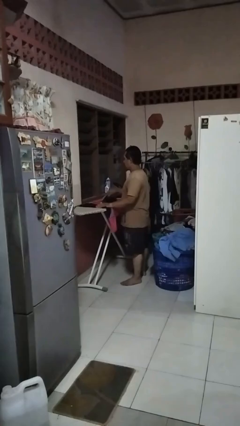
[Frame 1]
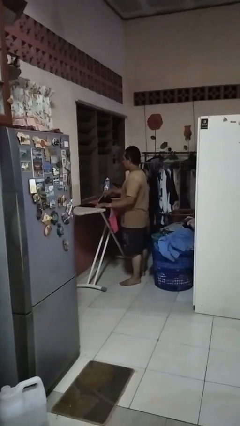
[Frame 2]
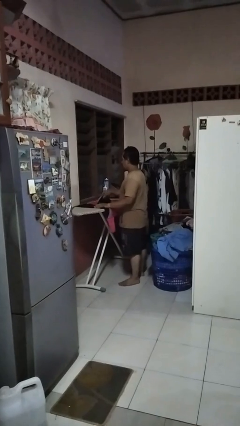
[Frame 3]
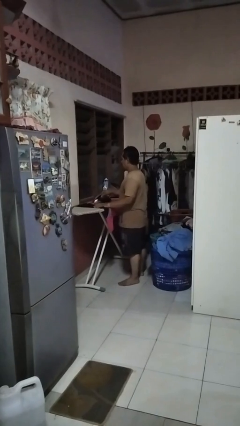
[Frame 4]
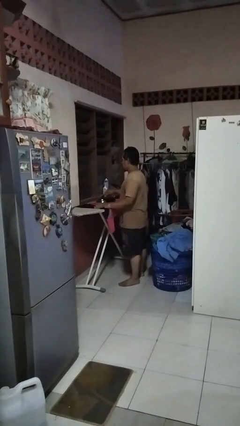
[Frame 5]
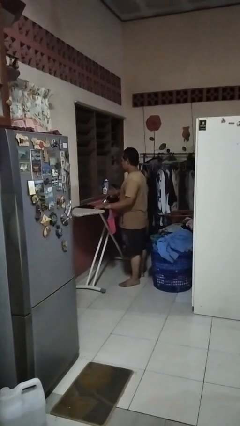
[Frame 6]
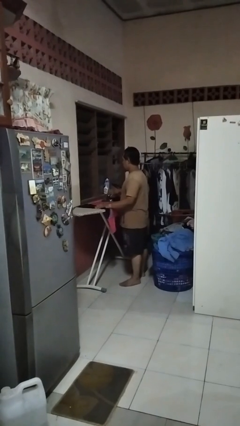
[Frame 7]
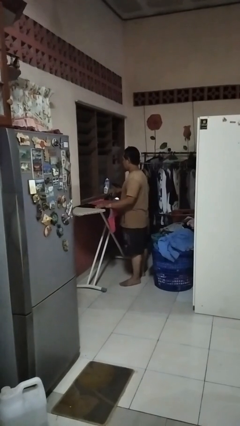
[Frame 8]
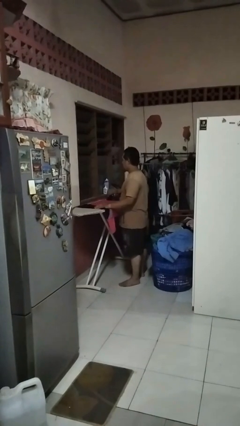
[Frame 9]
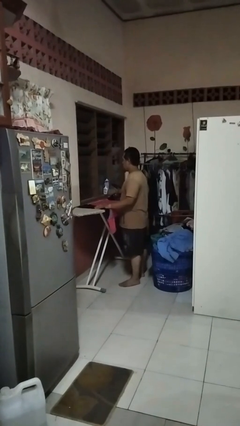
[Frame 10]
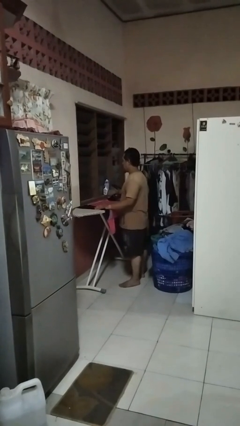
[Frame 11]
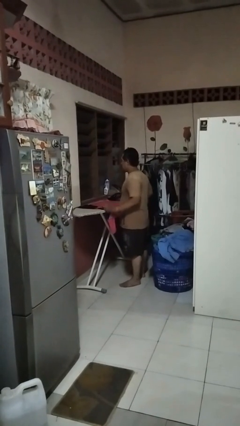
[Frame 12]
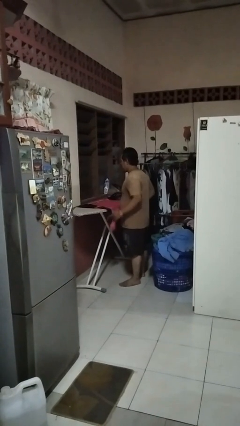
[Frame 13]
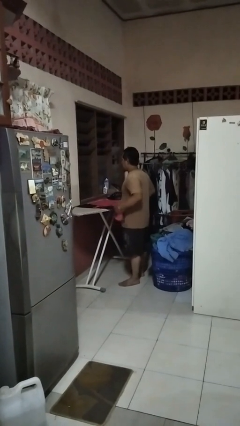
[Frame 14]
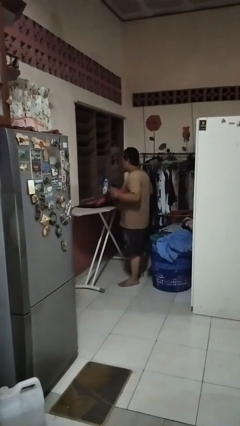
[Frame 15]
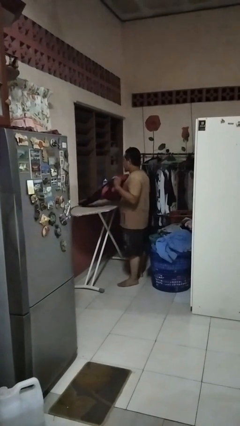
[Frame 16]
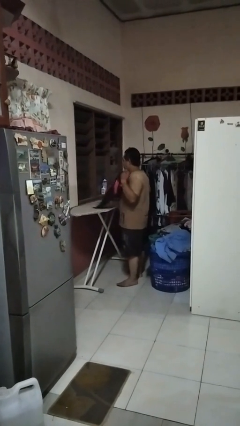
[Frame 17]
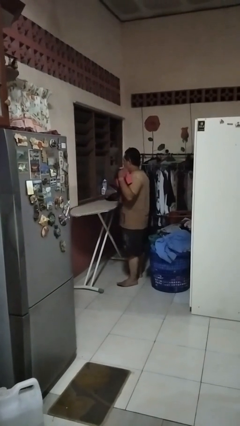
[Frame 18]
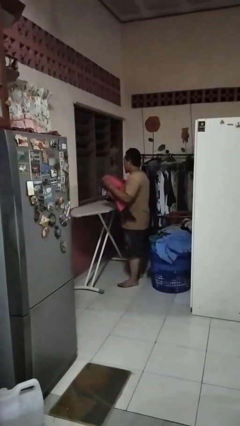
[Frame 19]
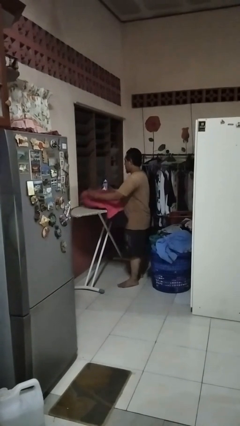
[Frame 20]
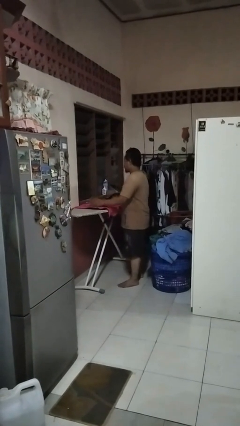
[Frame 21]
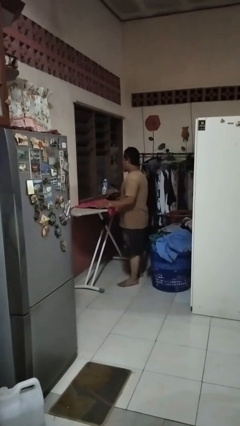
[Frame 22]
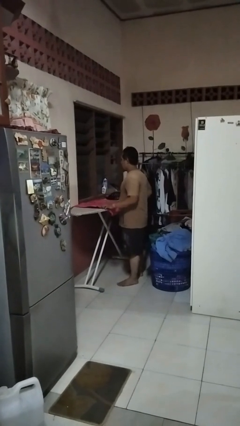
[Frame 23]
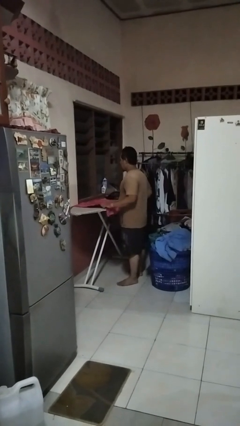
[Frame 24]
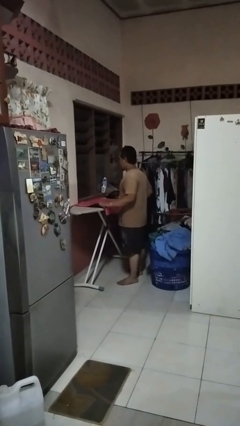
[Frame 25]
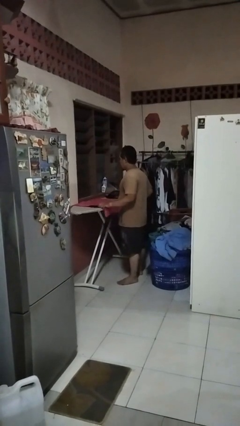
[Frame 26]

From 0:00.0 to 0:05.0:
person irons clothes

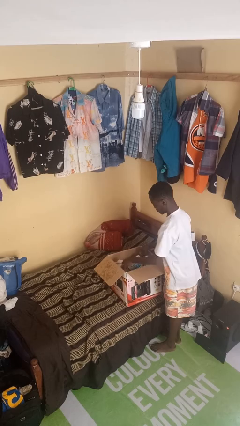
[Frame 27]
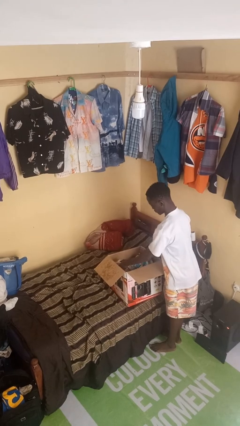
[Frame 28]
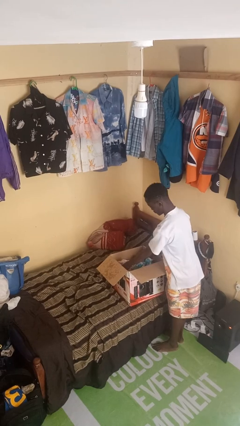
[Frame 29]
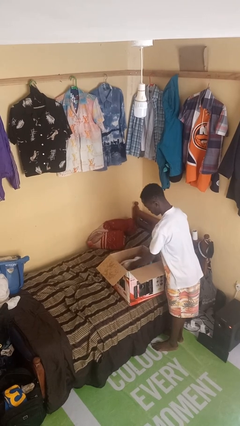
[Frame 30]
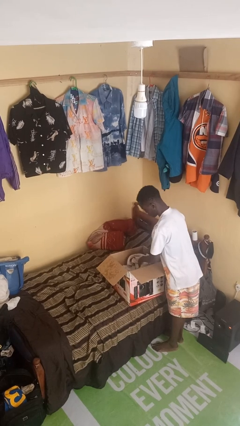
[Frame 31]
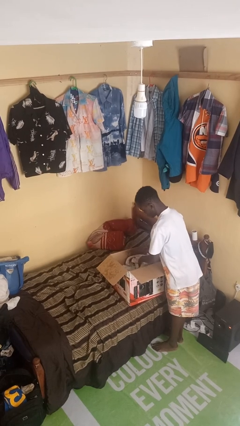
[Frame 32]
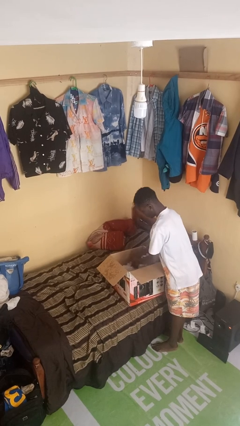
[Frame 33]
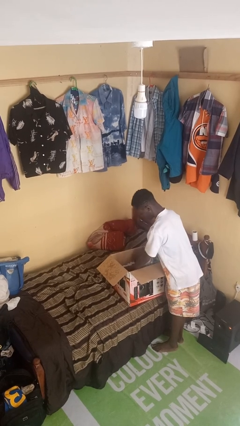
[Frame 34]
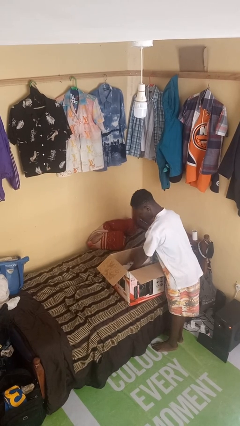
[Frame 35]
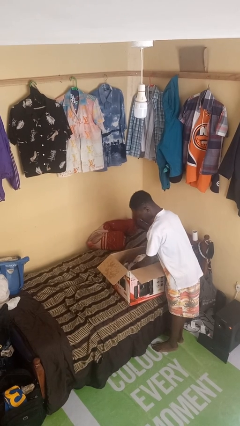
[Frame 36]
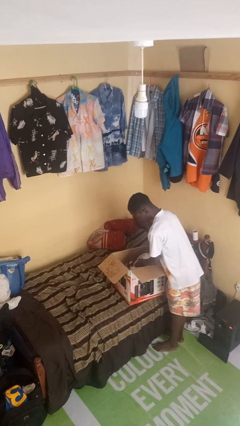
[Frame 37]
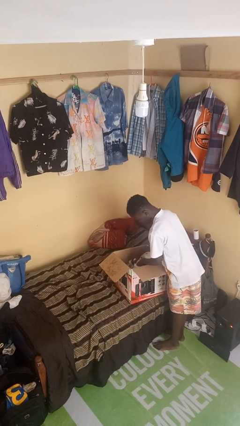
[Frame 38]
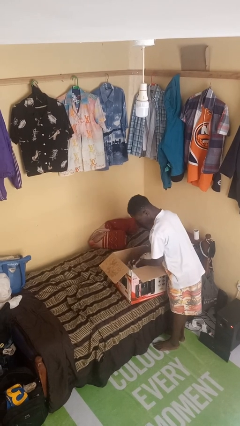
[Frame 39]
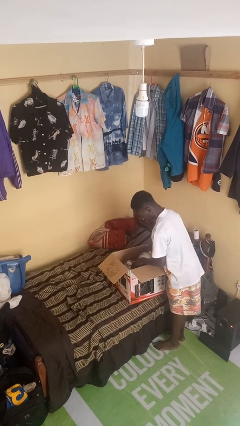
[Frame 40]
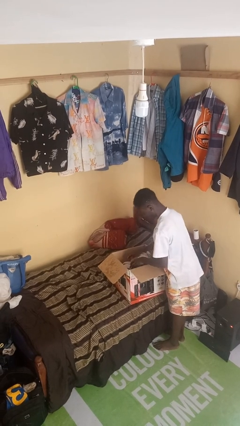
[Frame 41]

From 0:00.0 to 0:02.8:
person searches in box

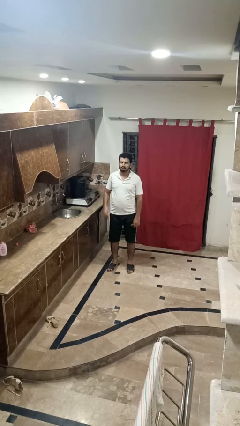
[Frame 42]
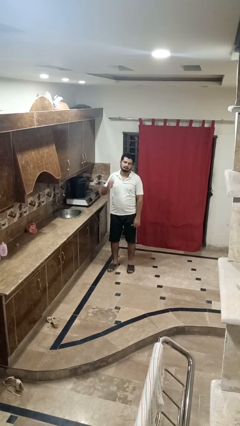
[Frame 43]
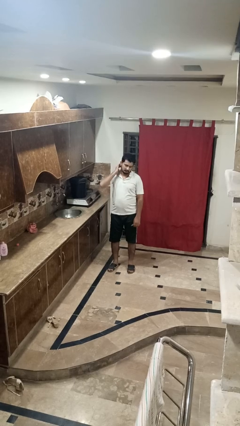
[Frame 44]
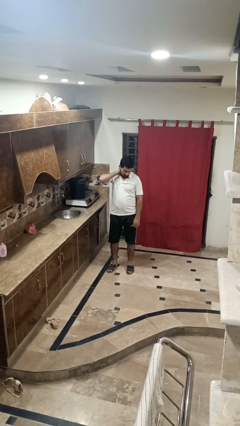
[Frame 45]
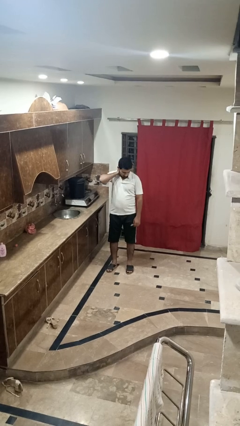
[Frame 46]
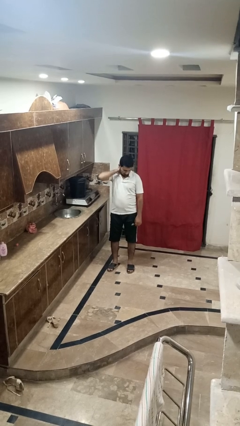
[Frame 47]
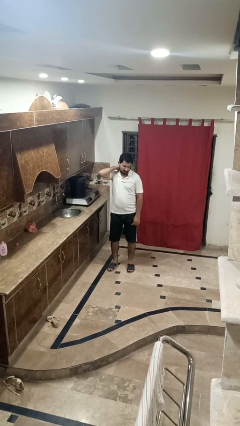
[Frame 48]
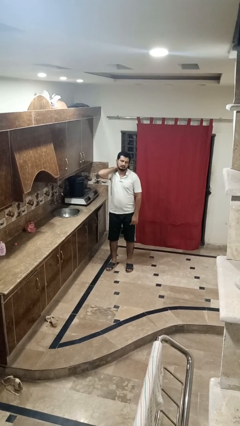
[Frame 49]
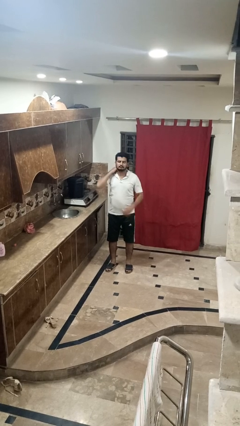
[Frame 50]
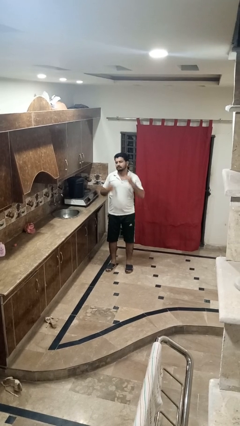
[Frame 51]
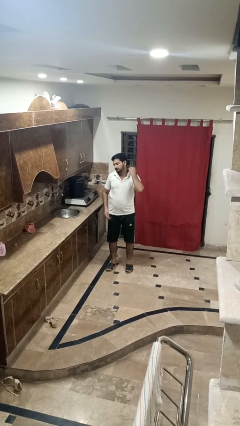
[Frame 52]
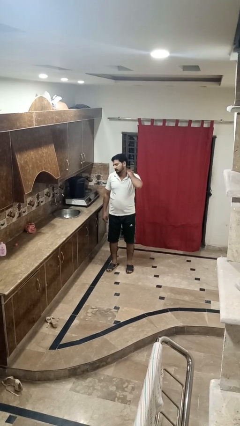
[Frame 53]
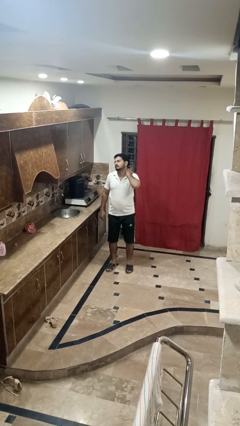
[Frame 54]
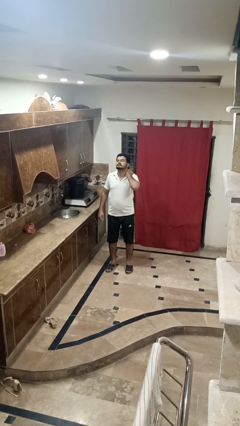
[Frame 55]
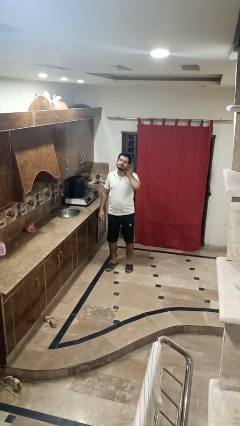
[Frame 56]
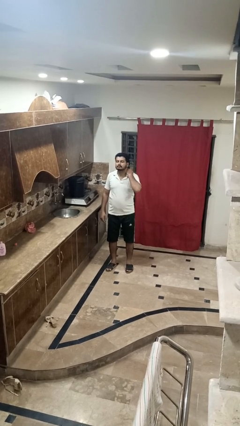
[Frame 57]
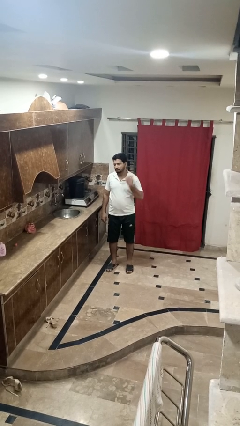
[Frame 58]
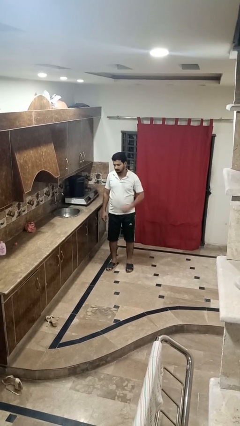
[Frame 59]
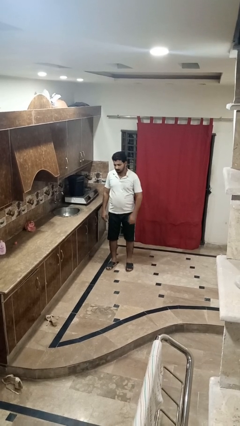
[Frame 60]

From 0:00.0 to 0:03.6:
person rubs neck

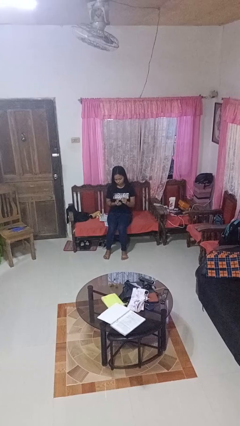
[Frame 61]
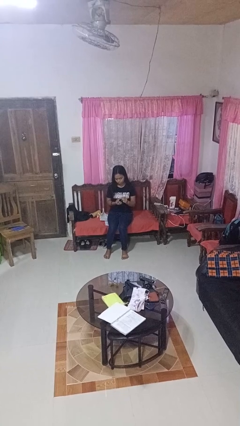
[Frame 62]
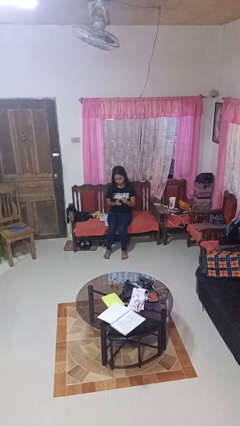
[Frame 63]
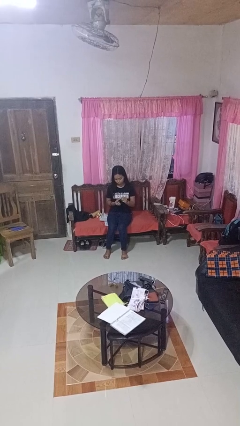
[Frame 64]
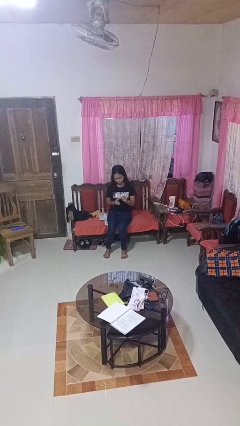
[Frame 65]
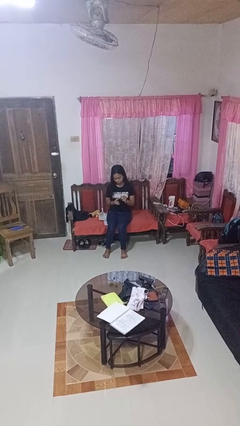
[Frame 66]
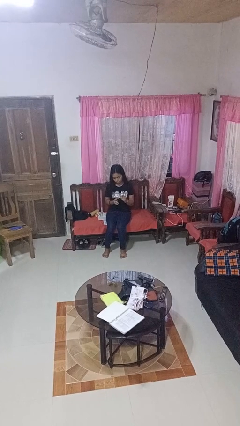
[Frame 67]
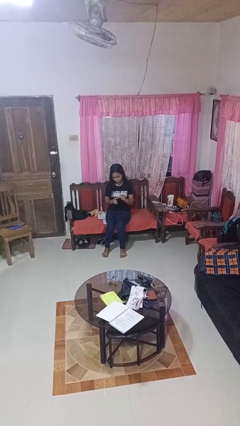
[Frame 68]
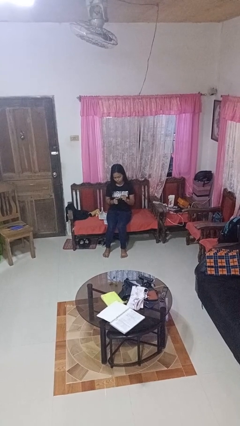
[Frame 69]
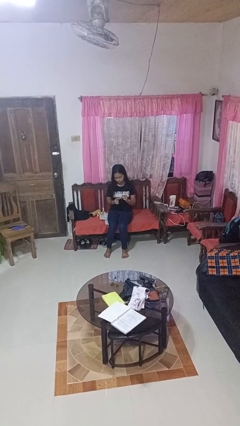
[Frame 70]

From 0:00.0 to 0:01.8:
person clips fingernails

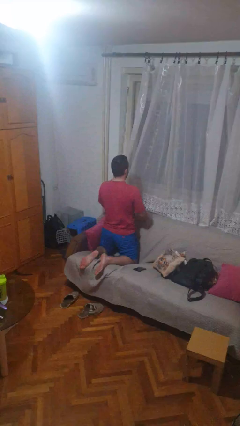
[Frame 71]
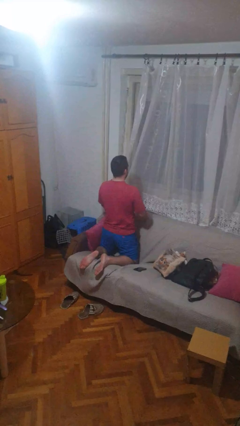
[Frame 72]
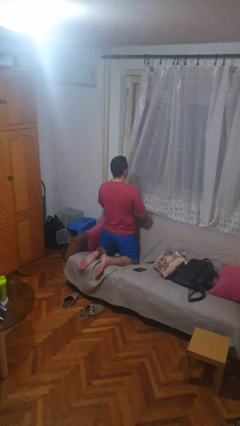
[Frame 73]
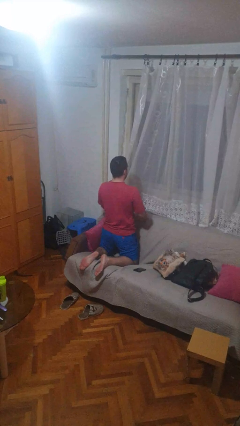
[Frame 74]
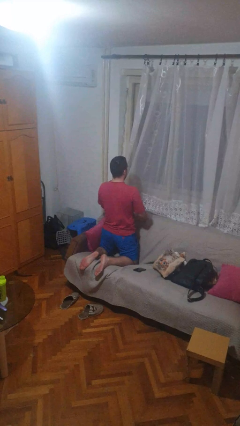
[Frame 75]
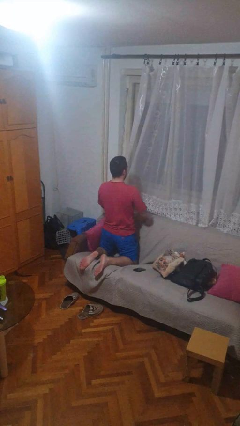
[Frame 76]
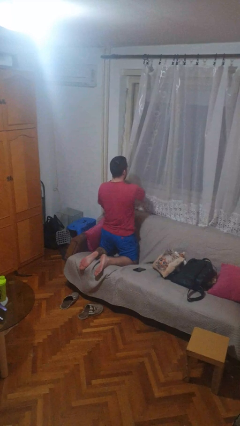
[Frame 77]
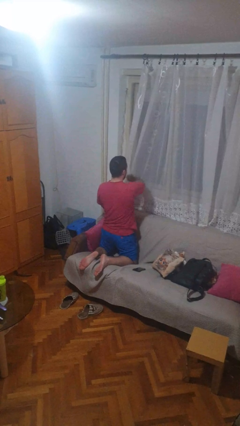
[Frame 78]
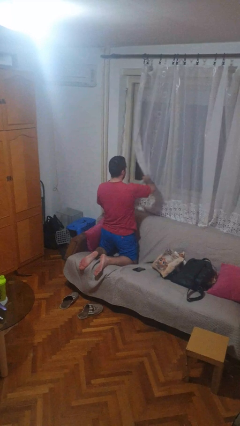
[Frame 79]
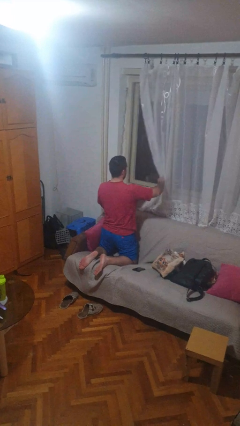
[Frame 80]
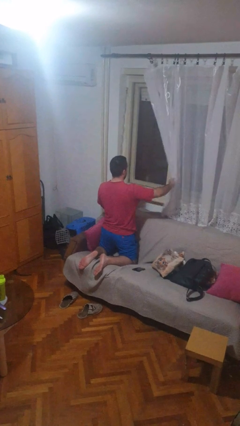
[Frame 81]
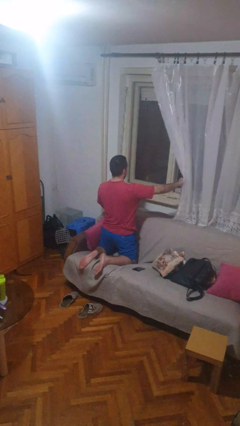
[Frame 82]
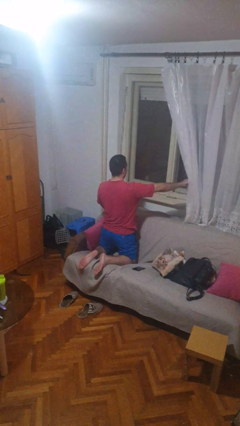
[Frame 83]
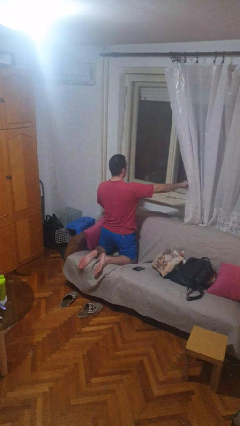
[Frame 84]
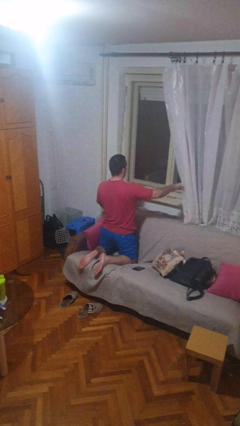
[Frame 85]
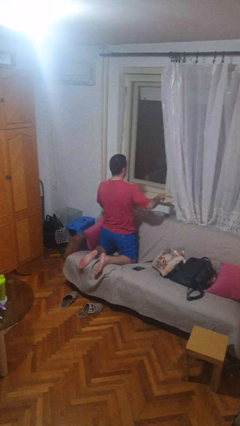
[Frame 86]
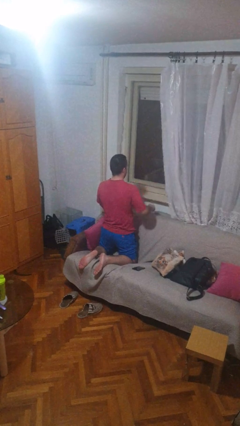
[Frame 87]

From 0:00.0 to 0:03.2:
person opens curtains

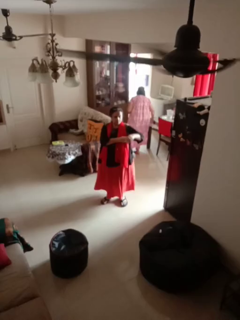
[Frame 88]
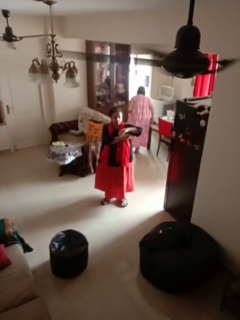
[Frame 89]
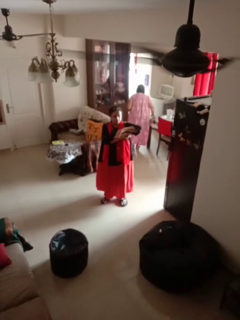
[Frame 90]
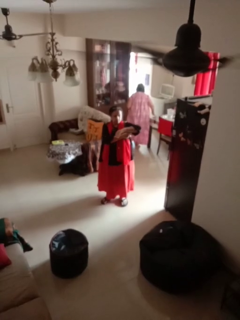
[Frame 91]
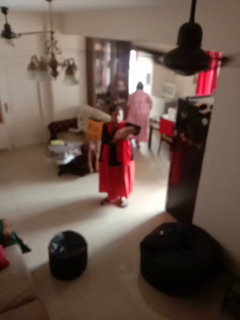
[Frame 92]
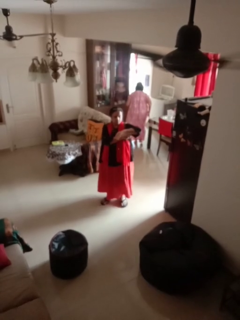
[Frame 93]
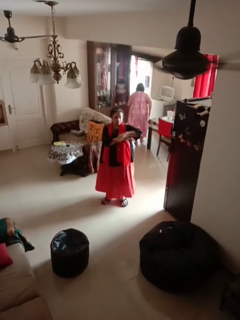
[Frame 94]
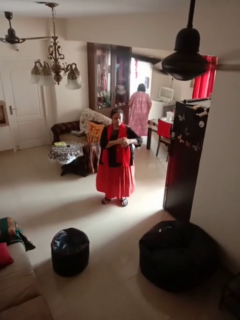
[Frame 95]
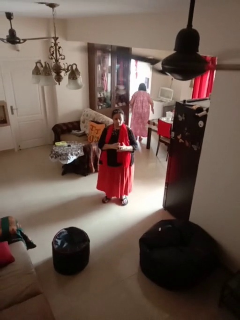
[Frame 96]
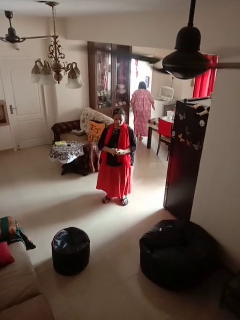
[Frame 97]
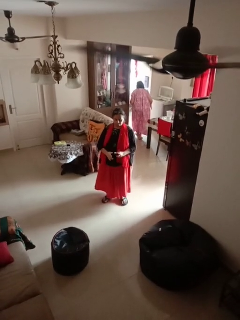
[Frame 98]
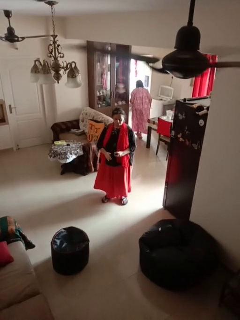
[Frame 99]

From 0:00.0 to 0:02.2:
person applies deodorant
